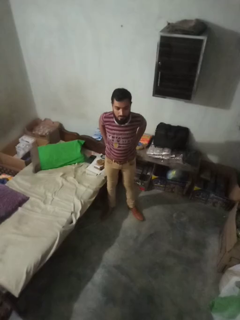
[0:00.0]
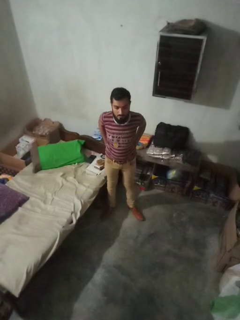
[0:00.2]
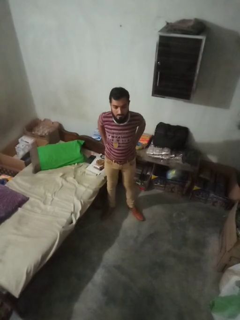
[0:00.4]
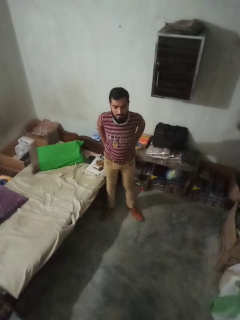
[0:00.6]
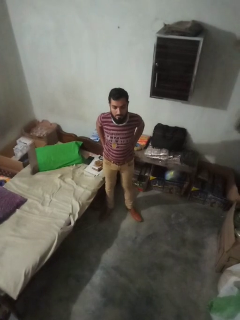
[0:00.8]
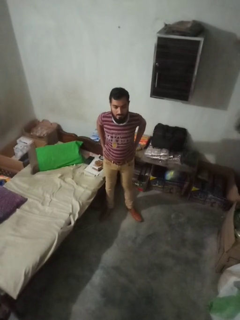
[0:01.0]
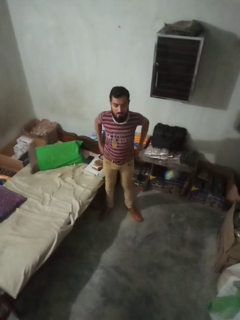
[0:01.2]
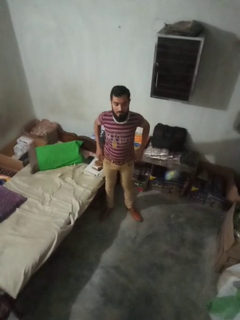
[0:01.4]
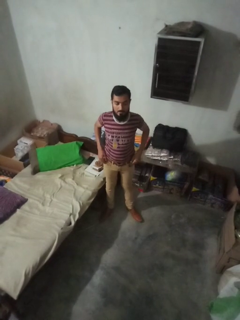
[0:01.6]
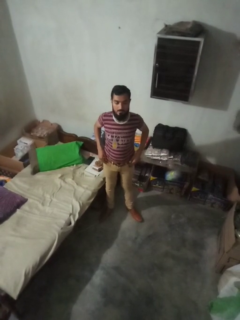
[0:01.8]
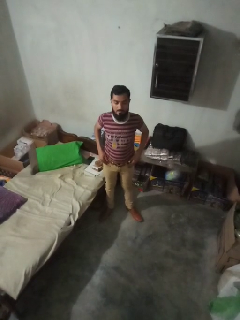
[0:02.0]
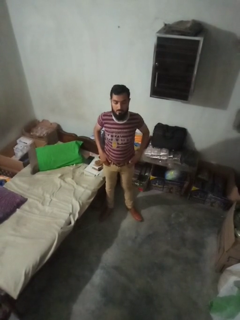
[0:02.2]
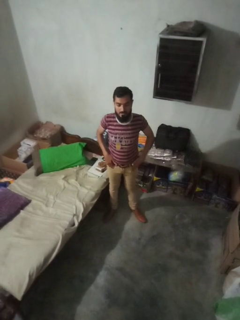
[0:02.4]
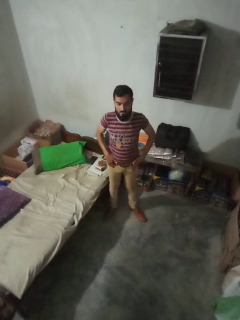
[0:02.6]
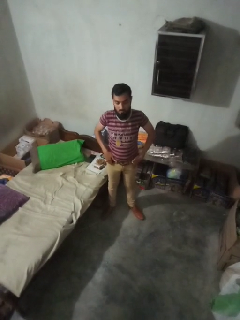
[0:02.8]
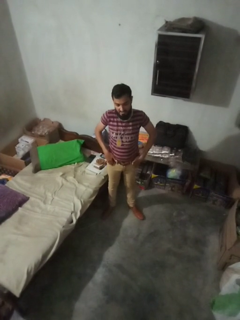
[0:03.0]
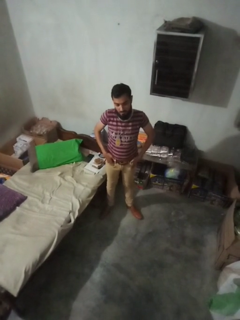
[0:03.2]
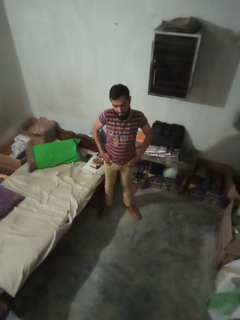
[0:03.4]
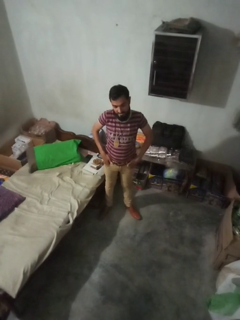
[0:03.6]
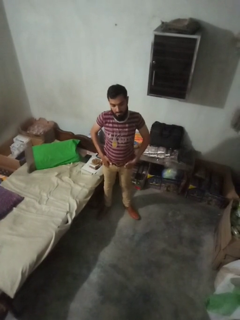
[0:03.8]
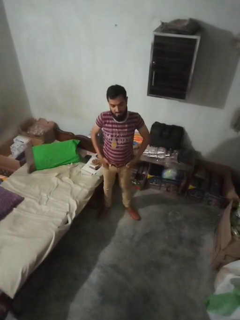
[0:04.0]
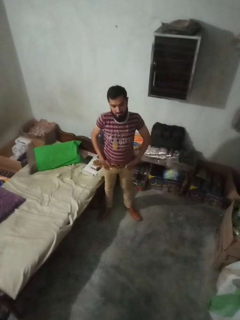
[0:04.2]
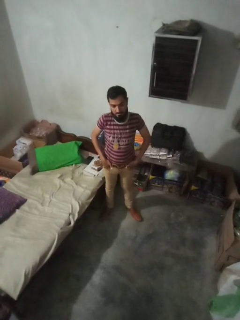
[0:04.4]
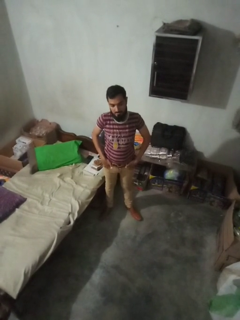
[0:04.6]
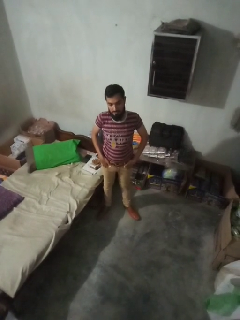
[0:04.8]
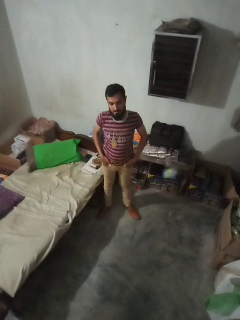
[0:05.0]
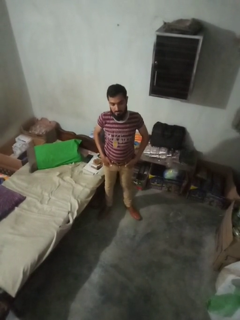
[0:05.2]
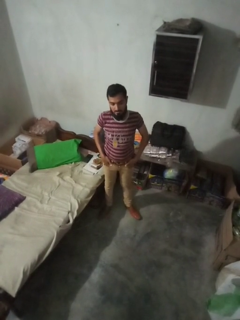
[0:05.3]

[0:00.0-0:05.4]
person puts hands in back pockets

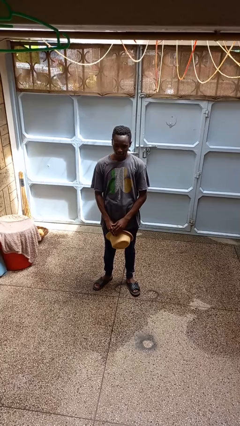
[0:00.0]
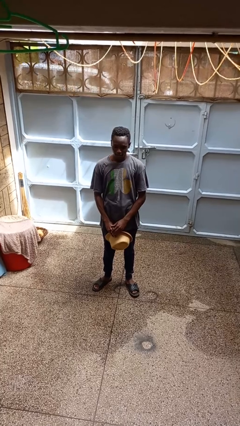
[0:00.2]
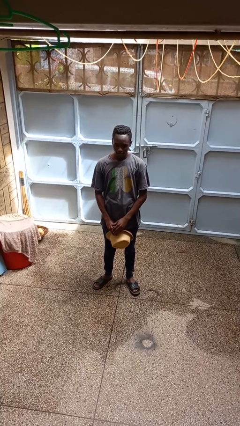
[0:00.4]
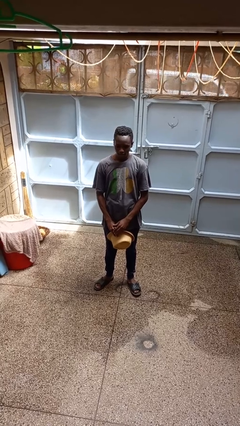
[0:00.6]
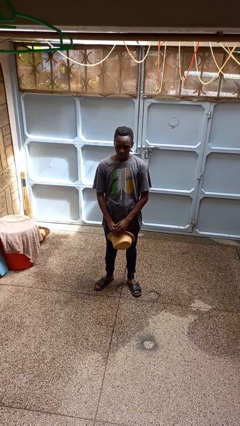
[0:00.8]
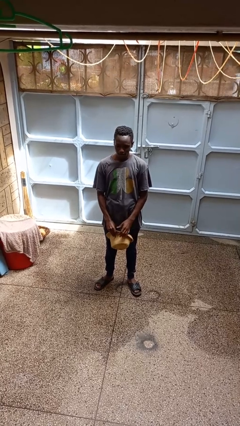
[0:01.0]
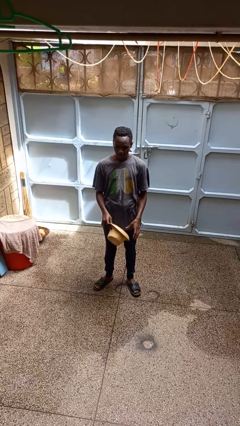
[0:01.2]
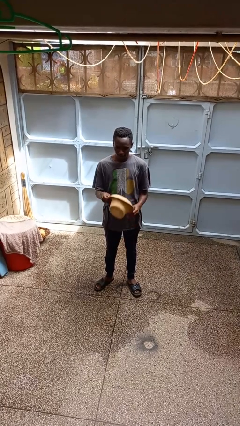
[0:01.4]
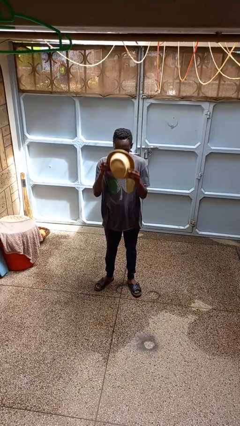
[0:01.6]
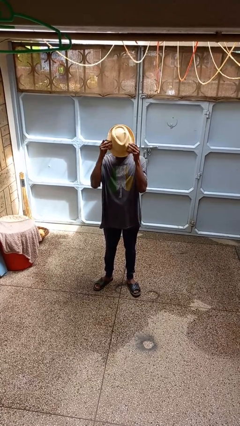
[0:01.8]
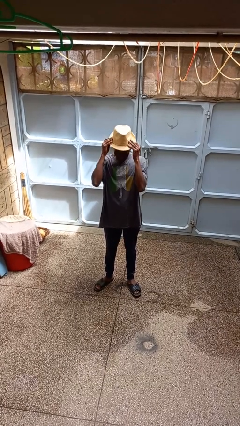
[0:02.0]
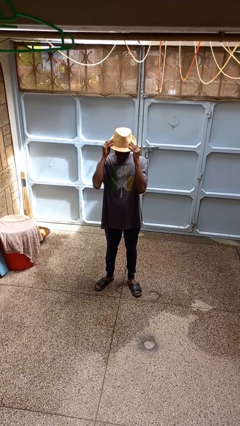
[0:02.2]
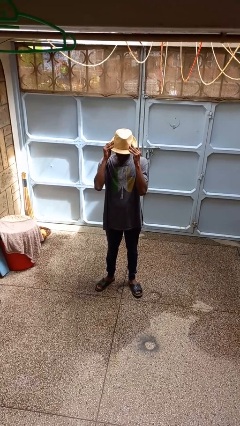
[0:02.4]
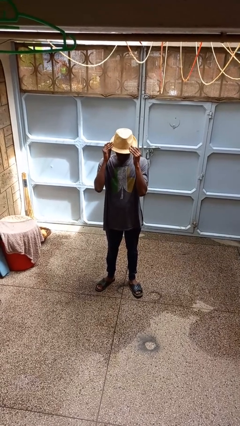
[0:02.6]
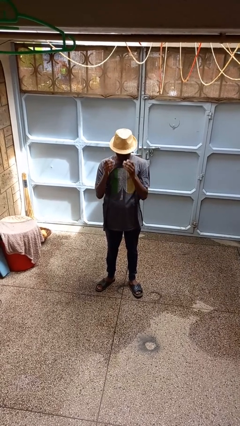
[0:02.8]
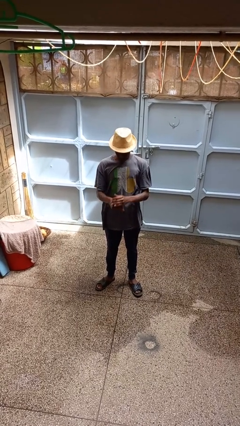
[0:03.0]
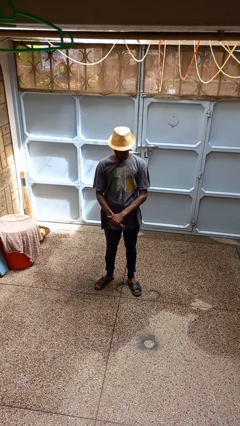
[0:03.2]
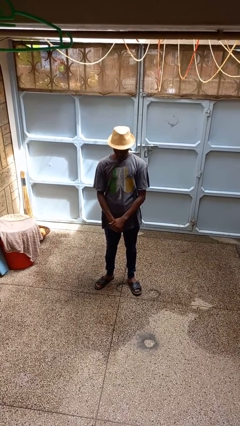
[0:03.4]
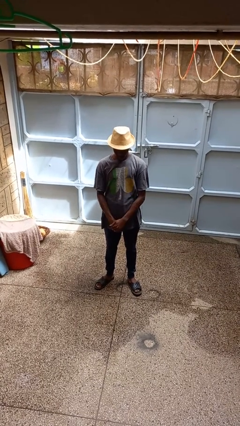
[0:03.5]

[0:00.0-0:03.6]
person puts on hat

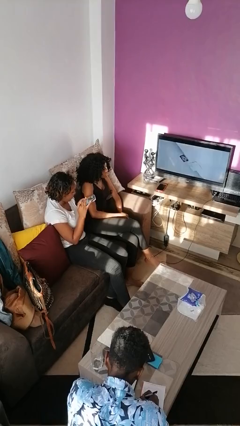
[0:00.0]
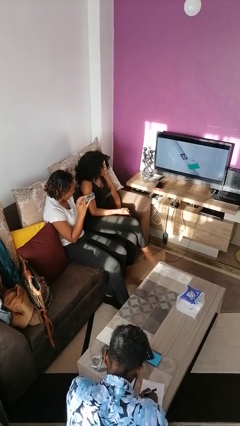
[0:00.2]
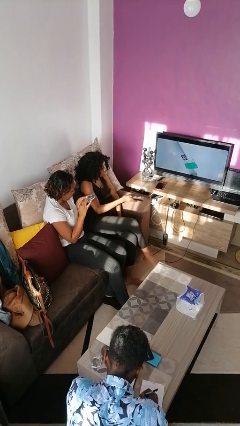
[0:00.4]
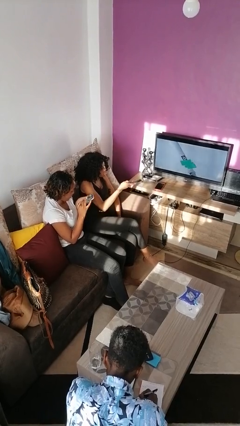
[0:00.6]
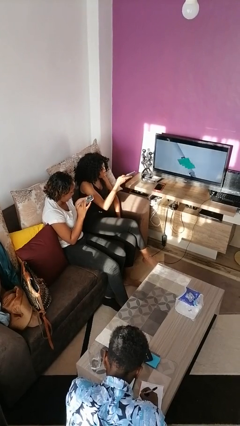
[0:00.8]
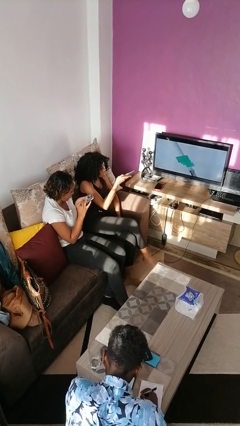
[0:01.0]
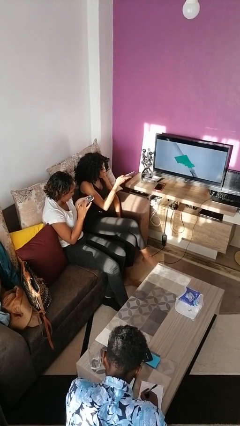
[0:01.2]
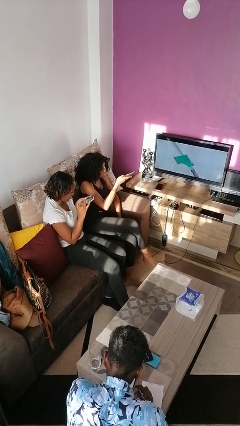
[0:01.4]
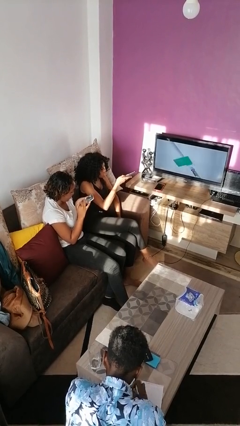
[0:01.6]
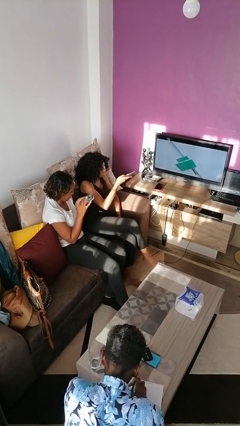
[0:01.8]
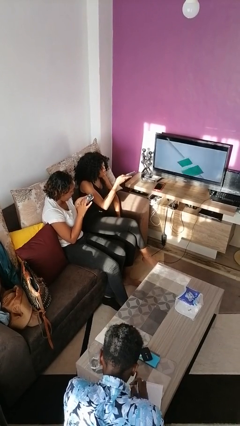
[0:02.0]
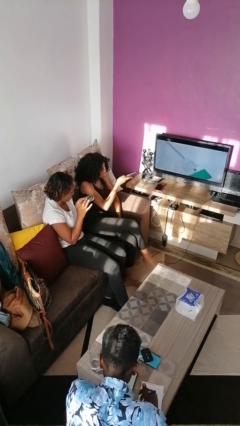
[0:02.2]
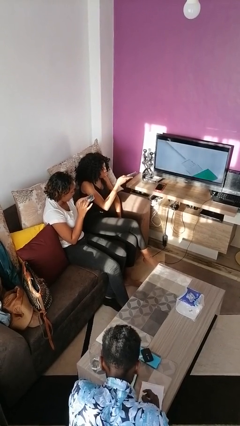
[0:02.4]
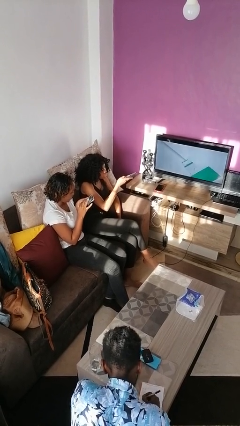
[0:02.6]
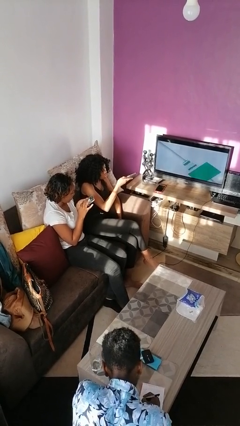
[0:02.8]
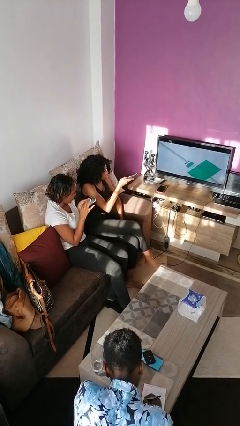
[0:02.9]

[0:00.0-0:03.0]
person takes off boots

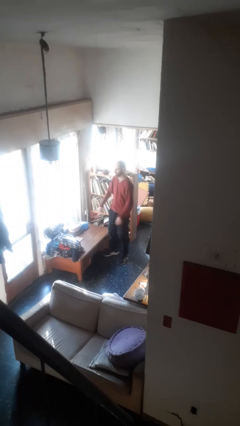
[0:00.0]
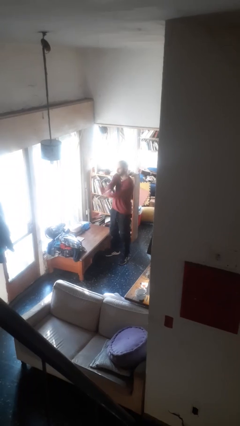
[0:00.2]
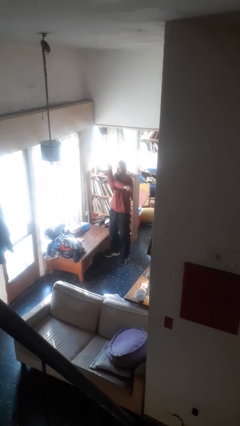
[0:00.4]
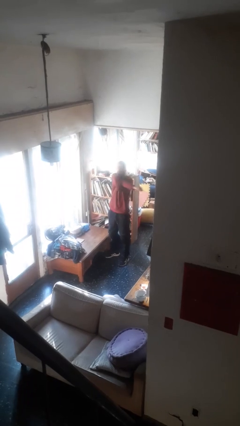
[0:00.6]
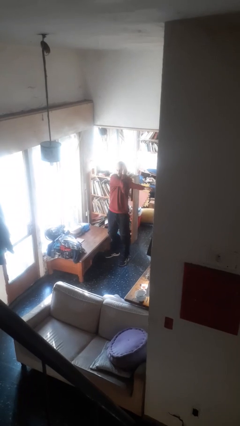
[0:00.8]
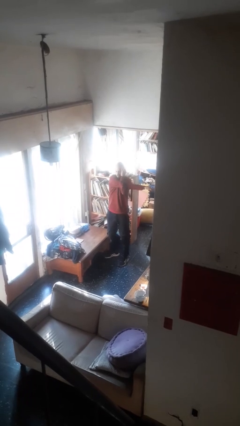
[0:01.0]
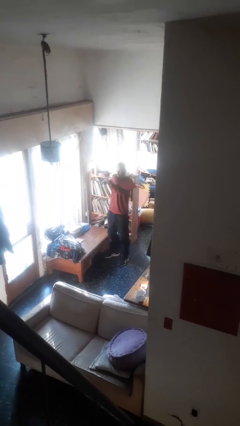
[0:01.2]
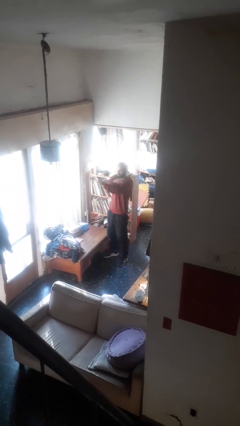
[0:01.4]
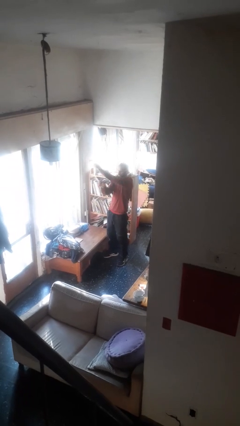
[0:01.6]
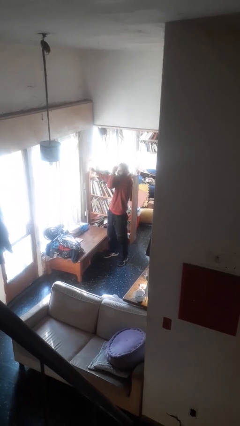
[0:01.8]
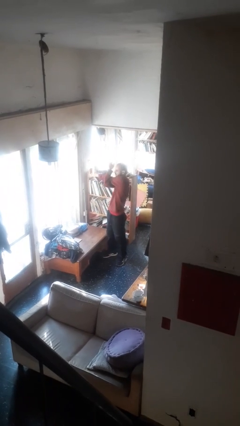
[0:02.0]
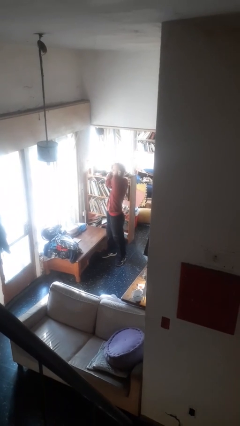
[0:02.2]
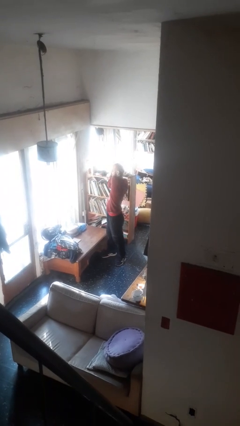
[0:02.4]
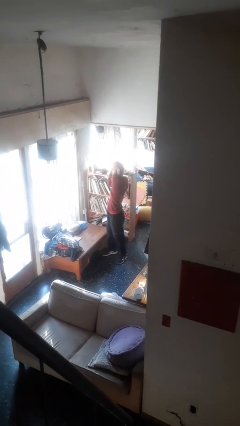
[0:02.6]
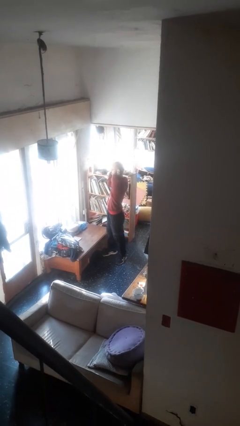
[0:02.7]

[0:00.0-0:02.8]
person stretches arms to side

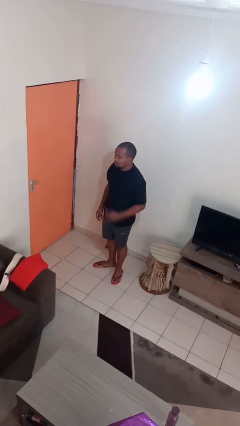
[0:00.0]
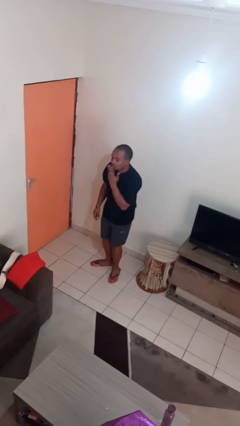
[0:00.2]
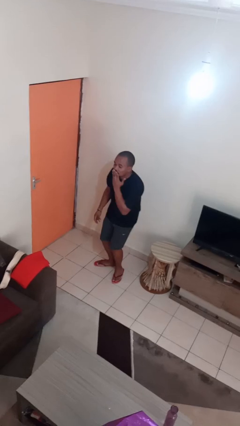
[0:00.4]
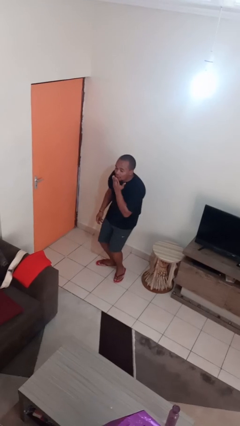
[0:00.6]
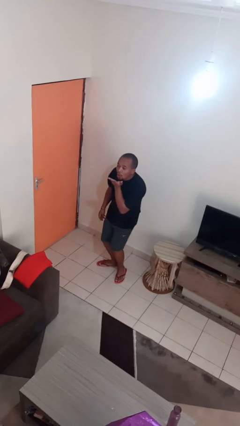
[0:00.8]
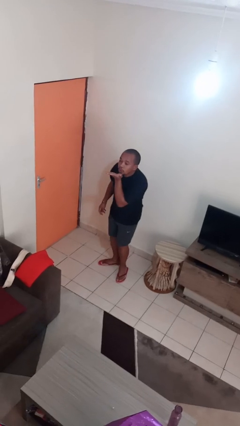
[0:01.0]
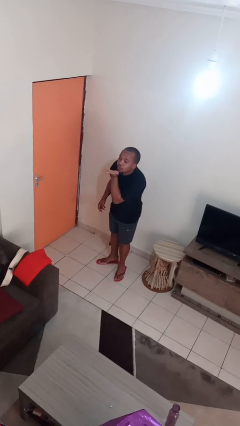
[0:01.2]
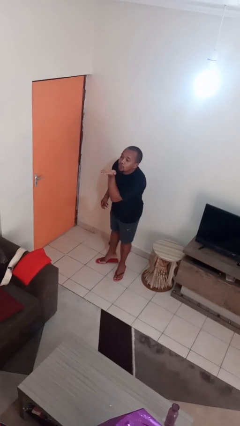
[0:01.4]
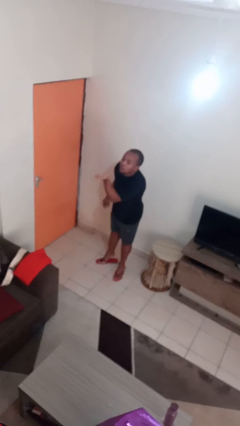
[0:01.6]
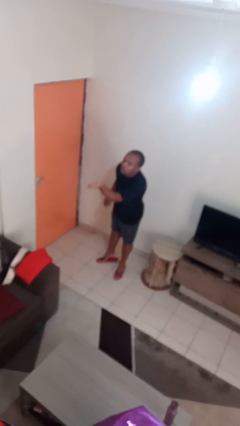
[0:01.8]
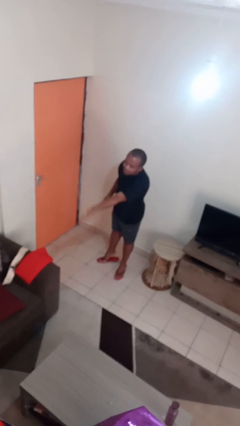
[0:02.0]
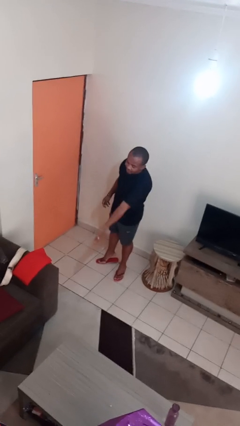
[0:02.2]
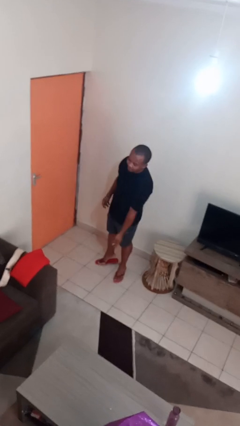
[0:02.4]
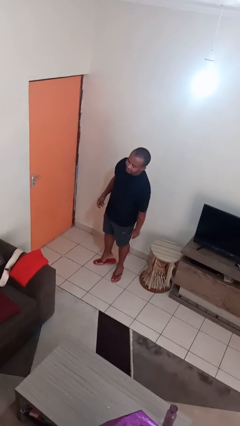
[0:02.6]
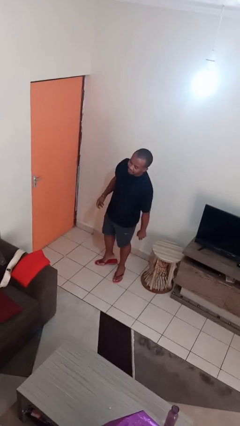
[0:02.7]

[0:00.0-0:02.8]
person gestures blow kiss

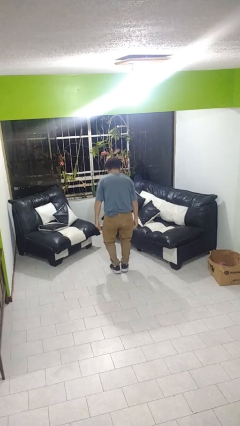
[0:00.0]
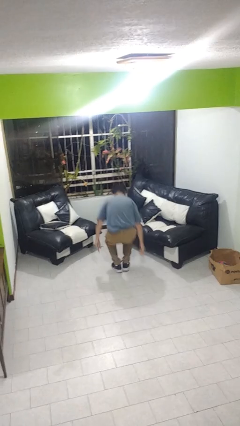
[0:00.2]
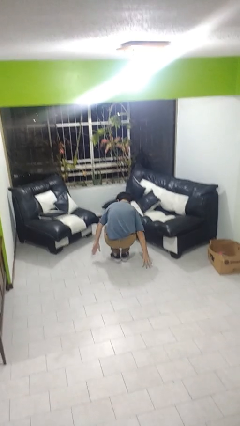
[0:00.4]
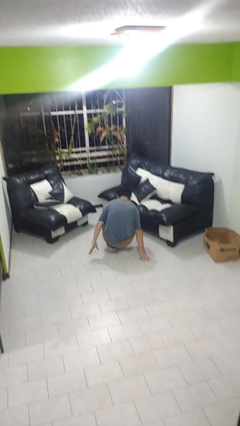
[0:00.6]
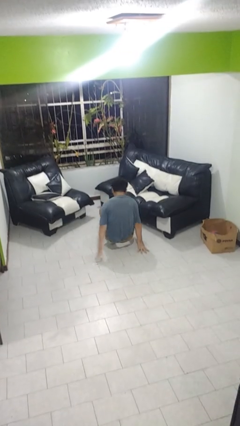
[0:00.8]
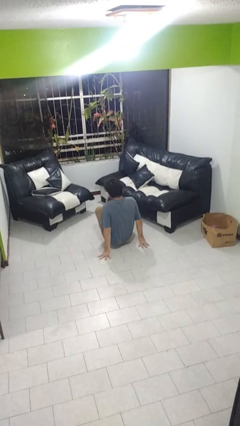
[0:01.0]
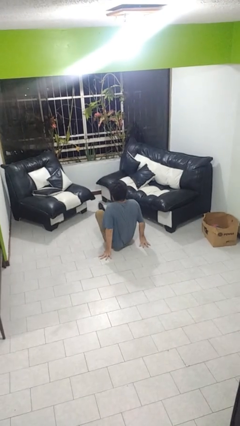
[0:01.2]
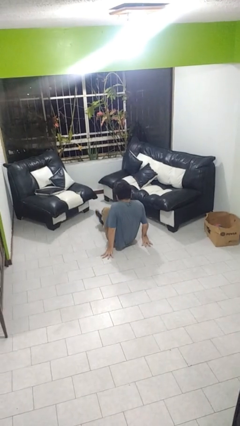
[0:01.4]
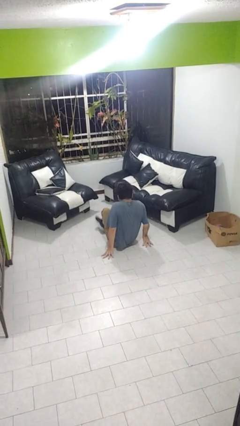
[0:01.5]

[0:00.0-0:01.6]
person sits crisscross
